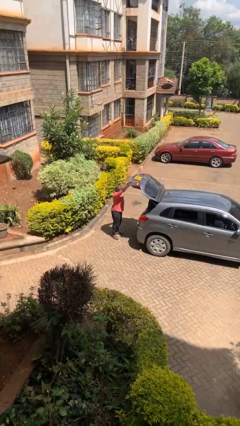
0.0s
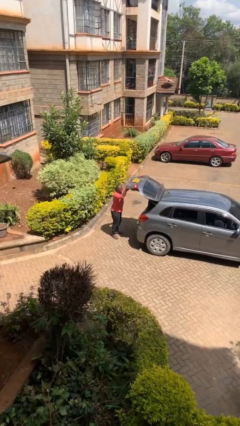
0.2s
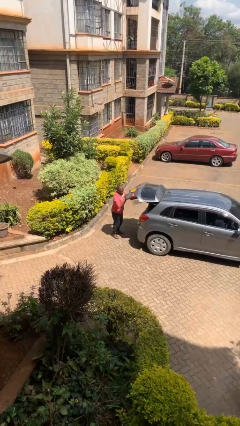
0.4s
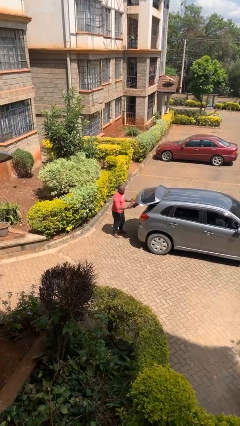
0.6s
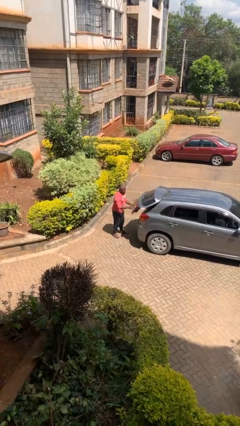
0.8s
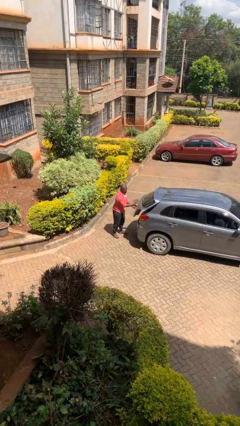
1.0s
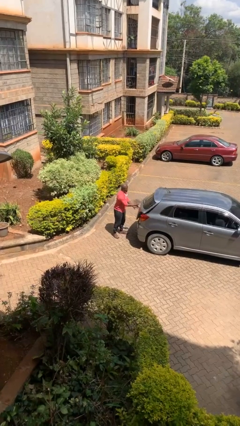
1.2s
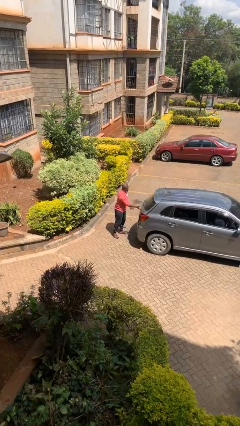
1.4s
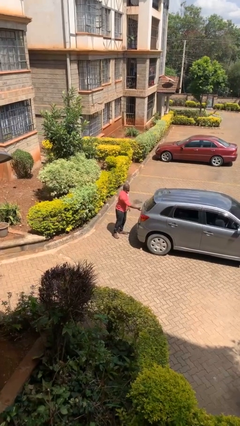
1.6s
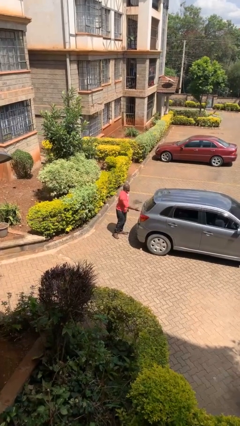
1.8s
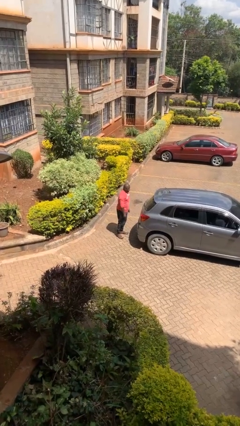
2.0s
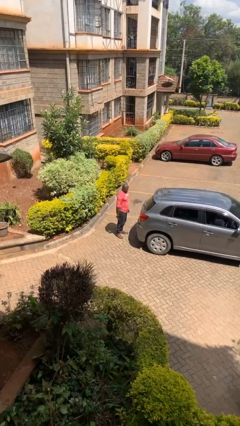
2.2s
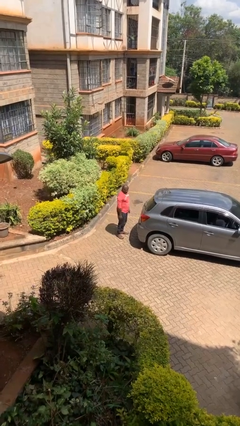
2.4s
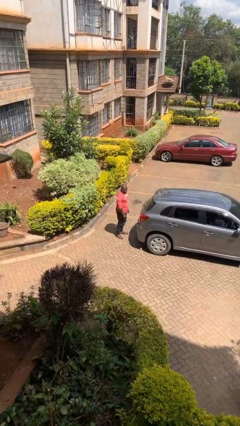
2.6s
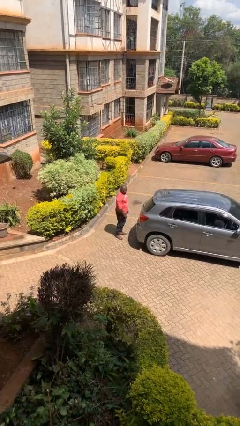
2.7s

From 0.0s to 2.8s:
person closes car trunk

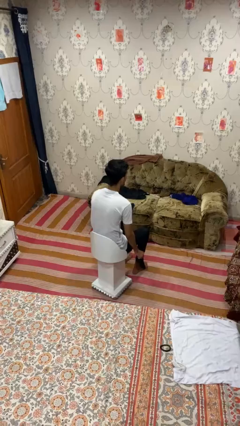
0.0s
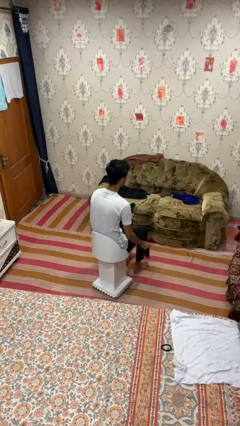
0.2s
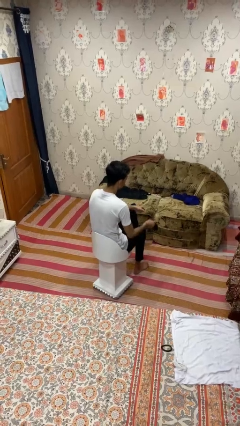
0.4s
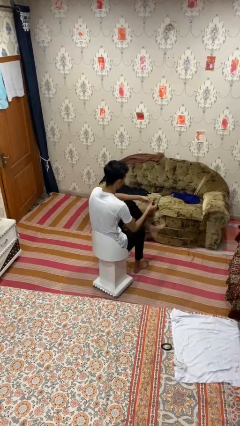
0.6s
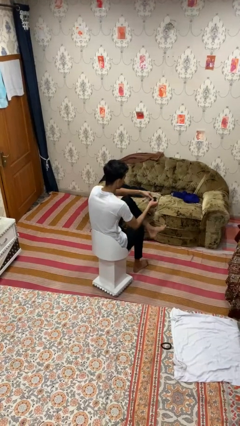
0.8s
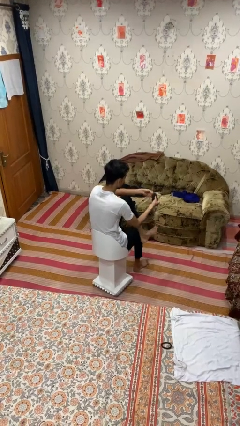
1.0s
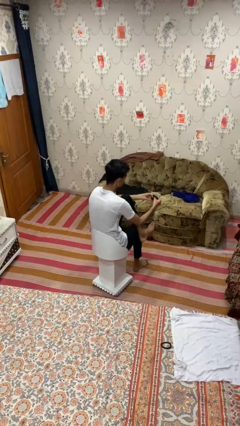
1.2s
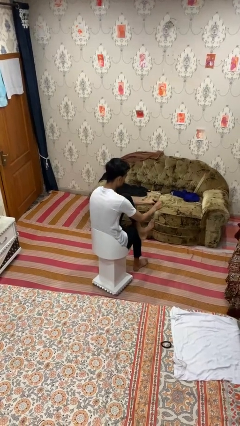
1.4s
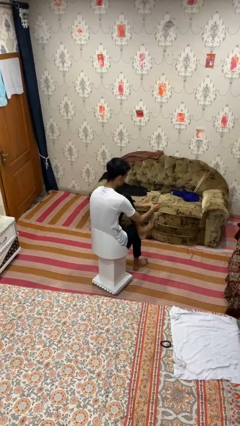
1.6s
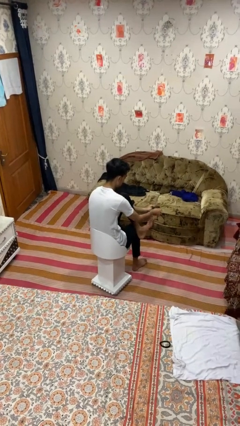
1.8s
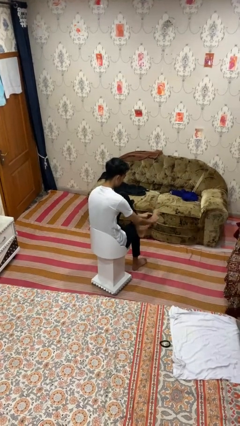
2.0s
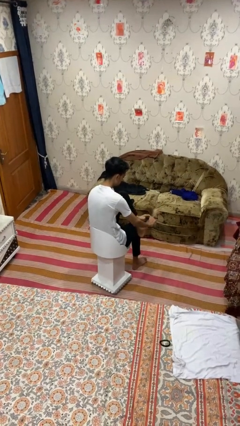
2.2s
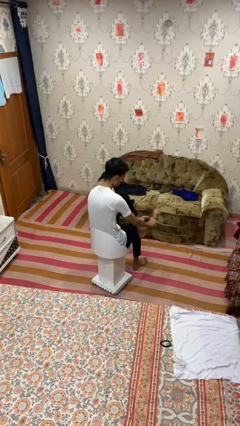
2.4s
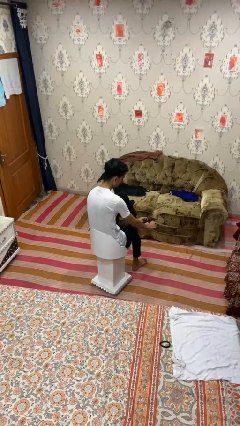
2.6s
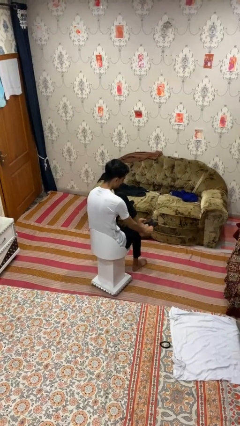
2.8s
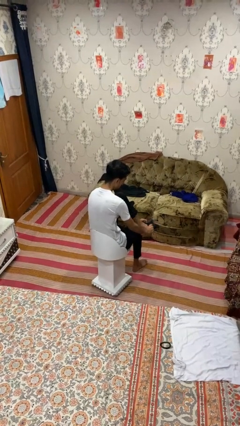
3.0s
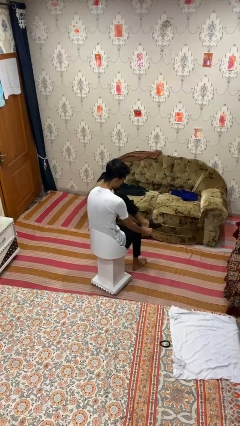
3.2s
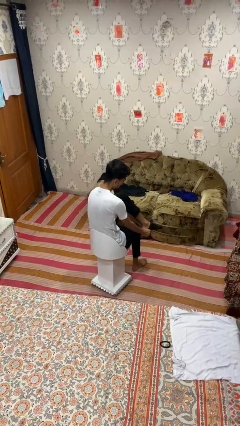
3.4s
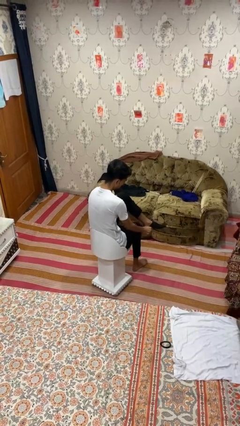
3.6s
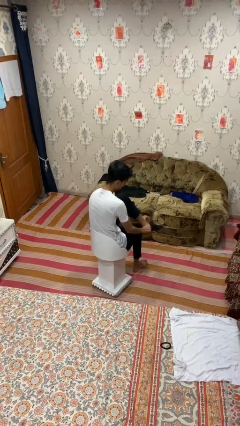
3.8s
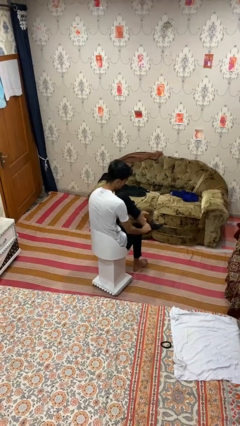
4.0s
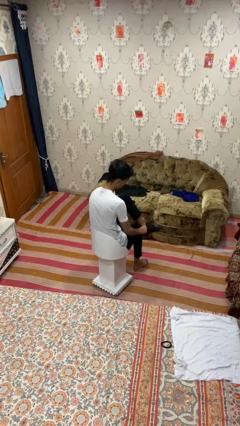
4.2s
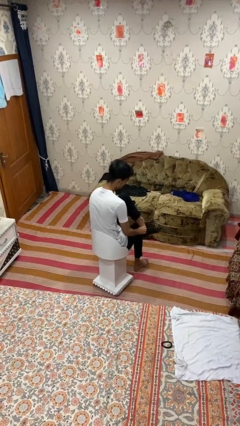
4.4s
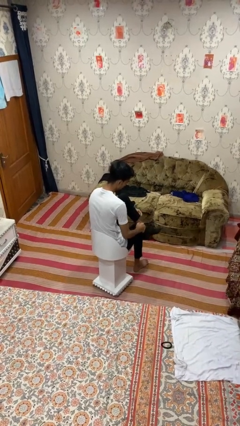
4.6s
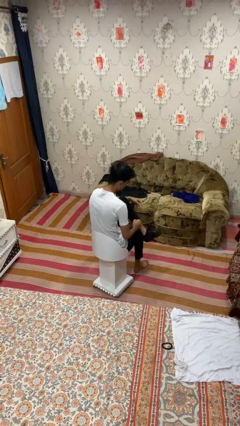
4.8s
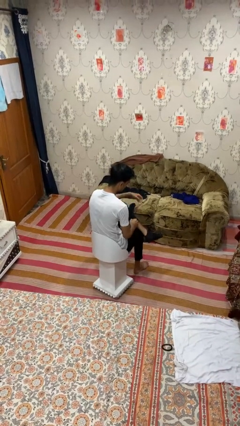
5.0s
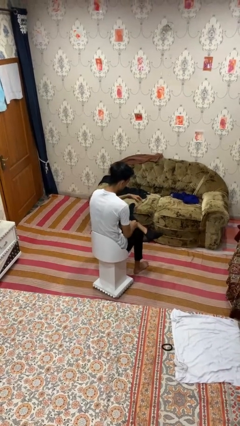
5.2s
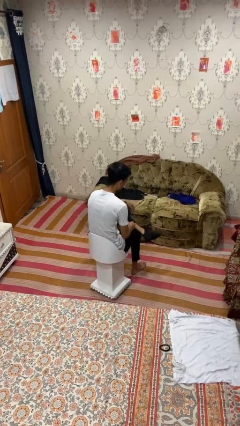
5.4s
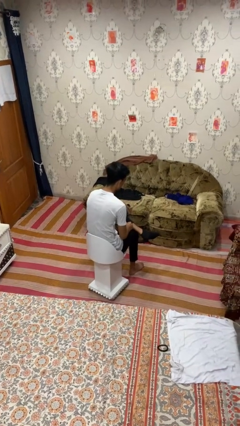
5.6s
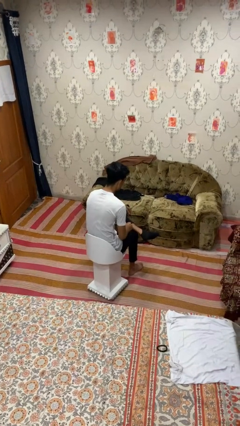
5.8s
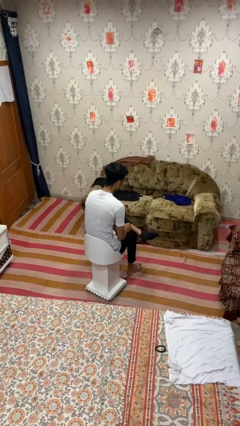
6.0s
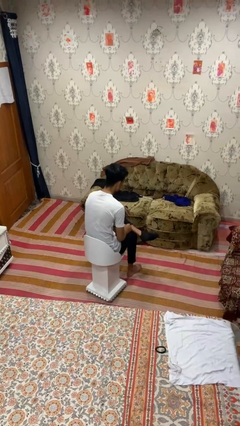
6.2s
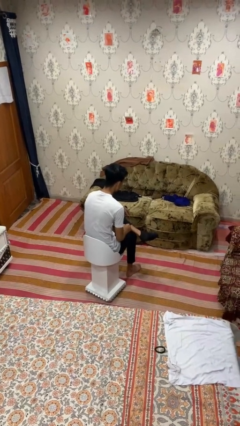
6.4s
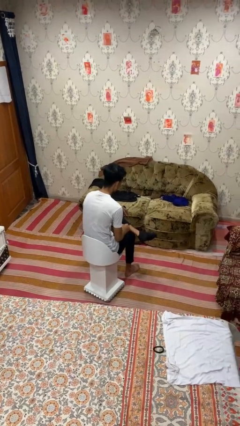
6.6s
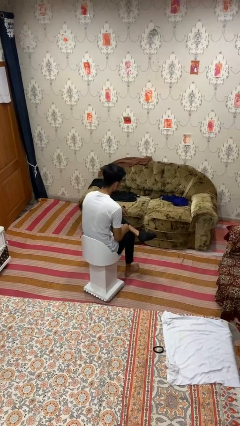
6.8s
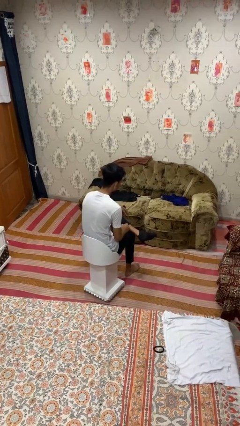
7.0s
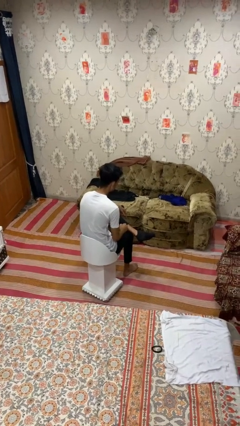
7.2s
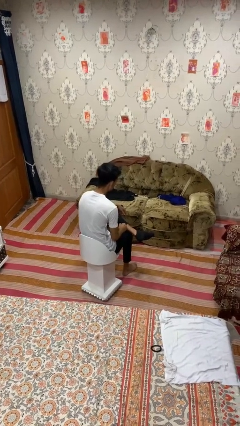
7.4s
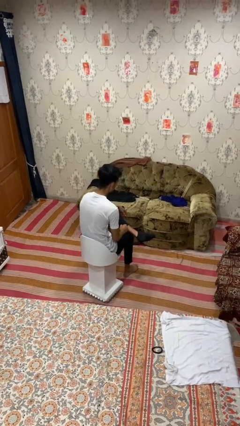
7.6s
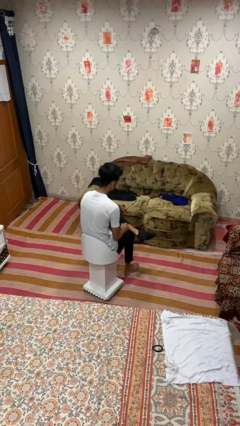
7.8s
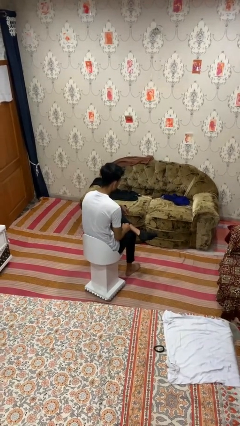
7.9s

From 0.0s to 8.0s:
person puts on socks

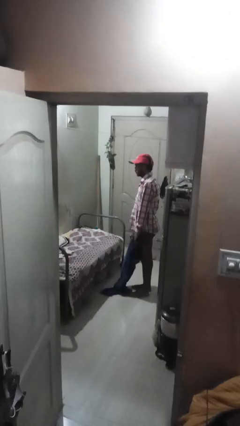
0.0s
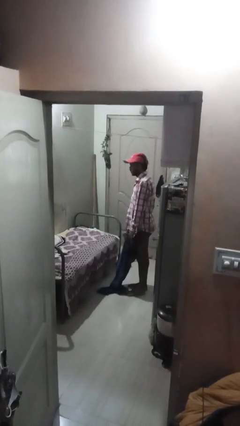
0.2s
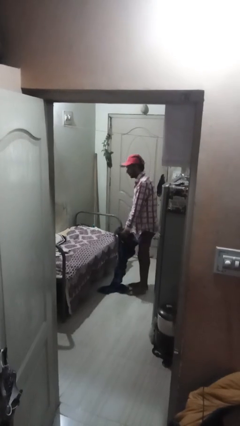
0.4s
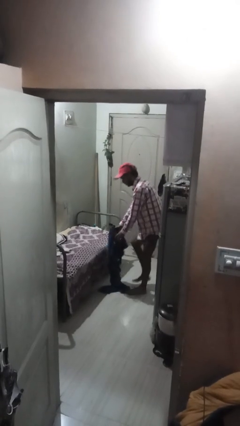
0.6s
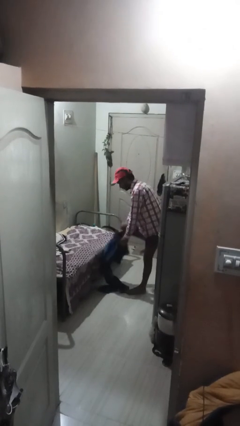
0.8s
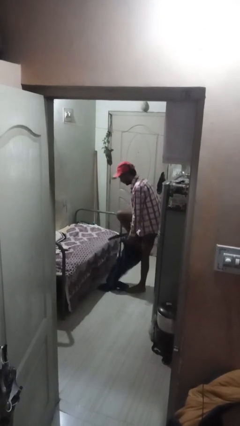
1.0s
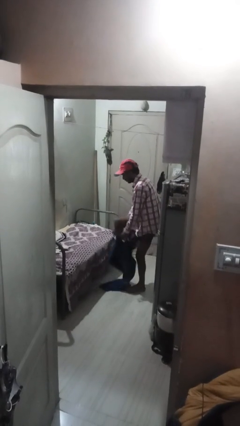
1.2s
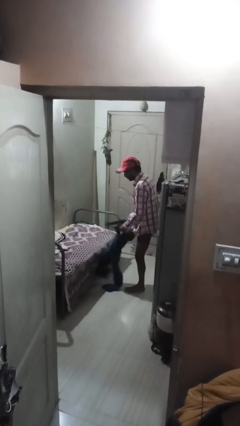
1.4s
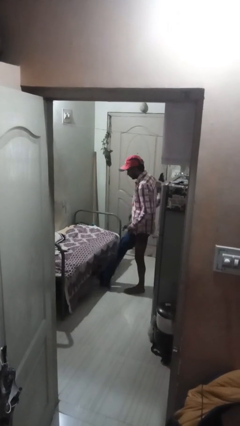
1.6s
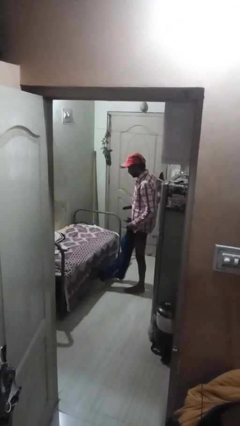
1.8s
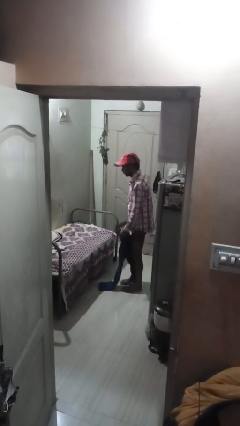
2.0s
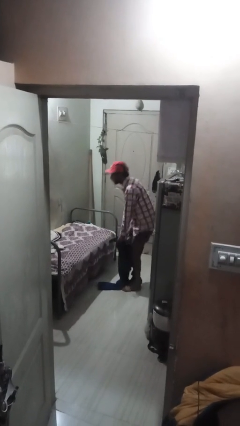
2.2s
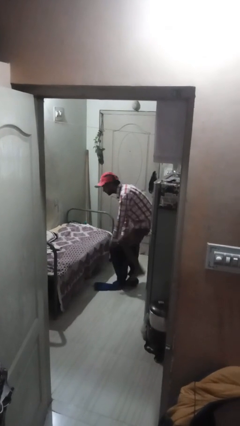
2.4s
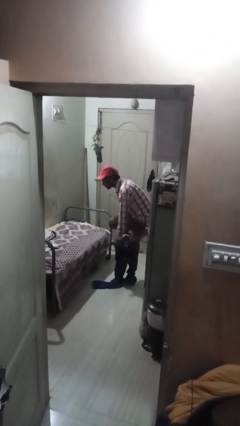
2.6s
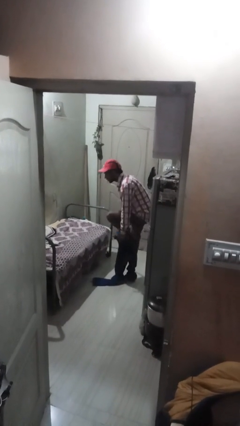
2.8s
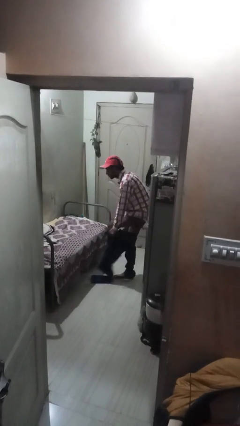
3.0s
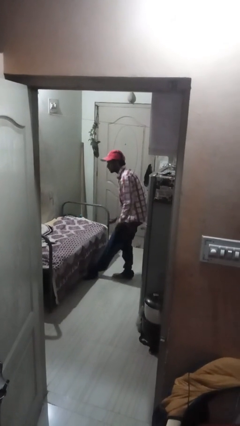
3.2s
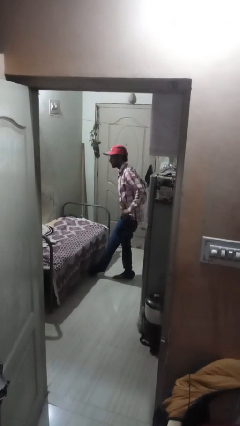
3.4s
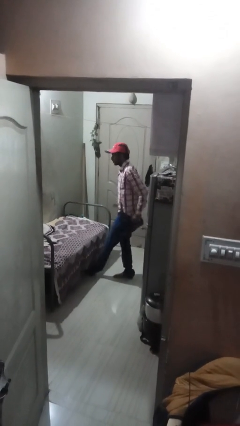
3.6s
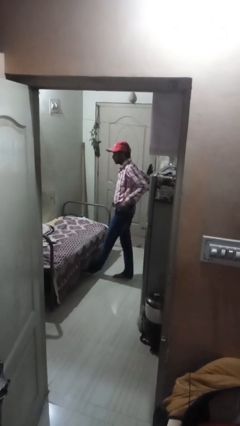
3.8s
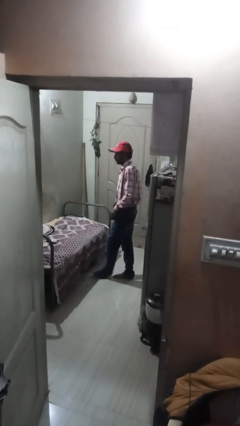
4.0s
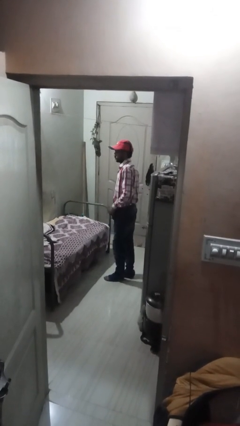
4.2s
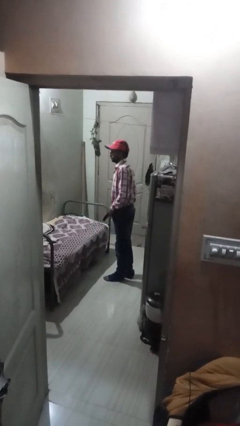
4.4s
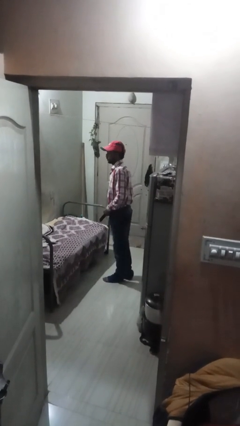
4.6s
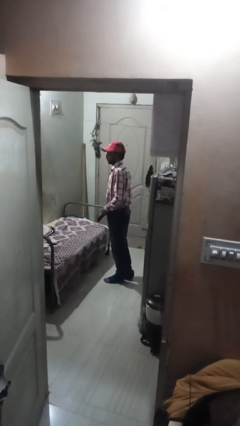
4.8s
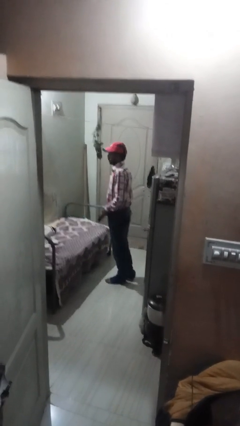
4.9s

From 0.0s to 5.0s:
person puts on pants

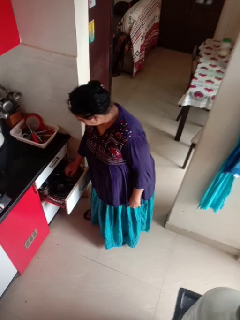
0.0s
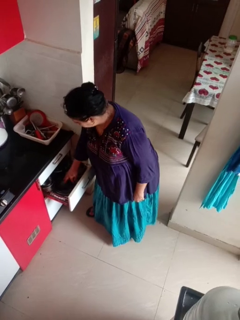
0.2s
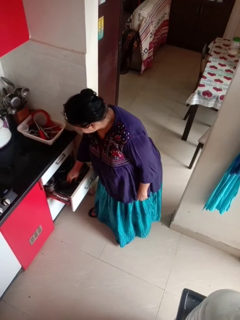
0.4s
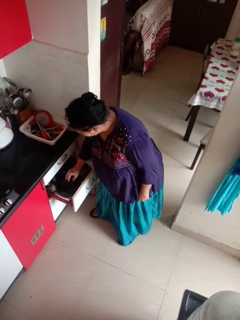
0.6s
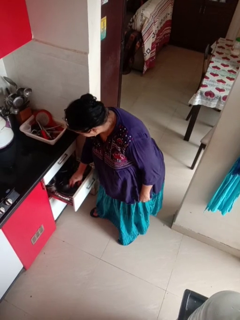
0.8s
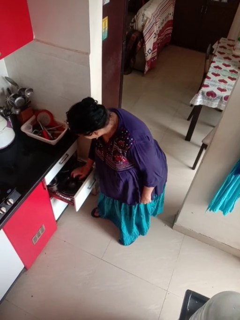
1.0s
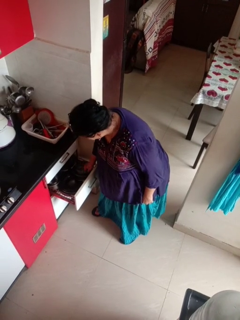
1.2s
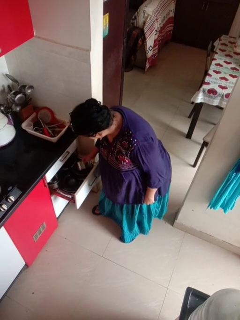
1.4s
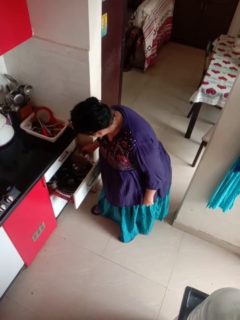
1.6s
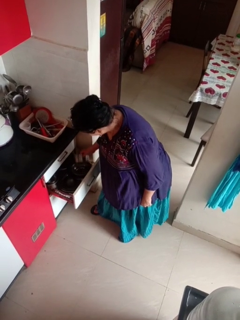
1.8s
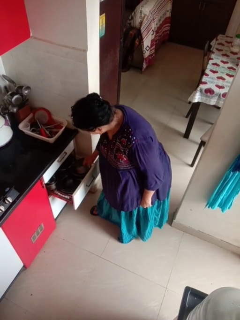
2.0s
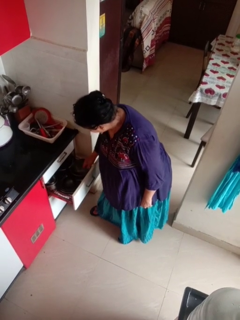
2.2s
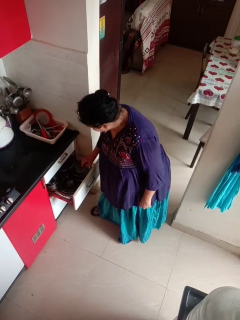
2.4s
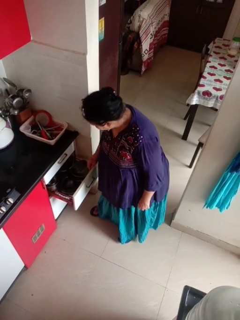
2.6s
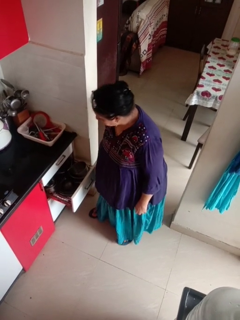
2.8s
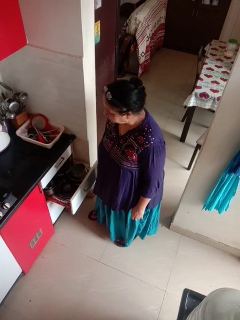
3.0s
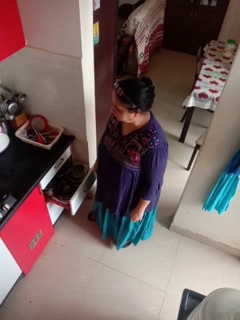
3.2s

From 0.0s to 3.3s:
person searches in kitchen drawer
